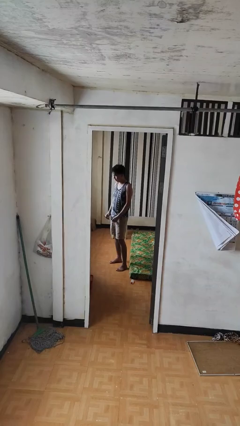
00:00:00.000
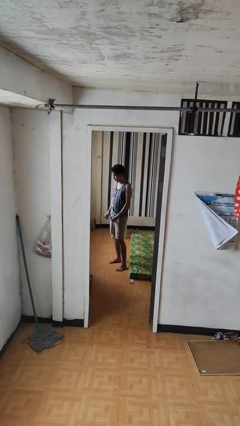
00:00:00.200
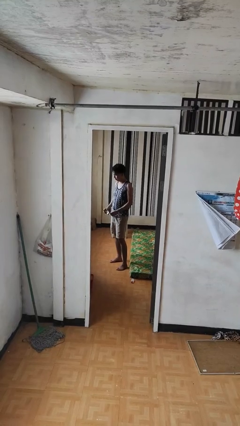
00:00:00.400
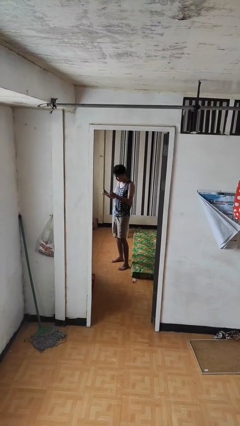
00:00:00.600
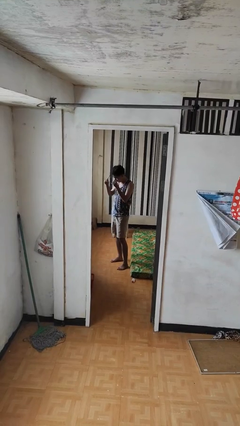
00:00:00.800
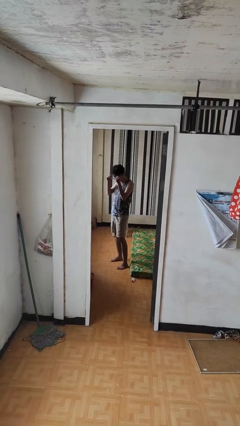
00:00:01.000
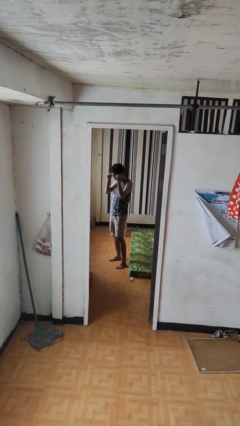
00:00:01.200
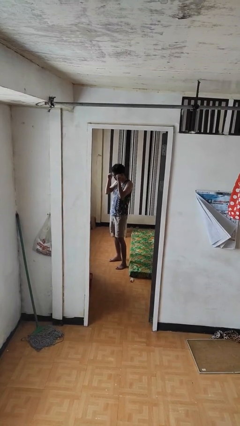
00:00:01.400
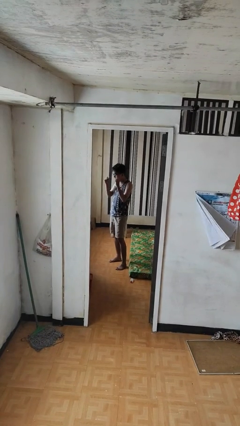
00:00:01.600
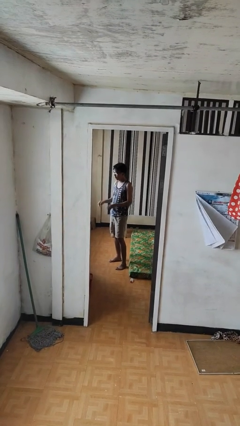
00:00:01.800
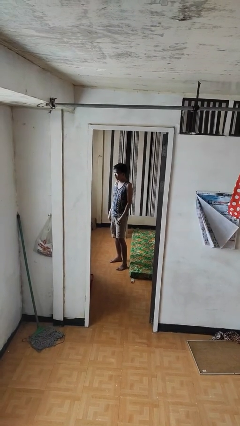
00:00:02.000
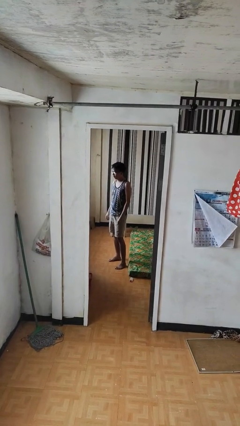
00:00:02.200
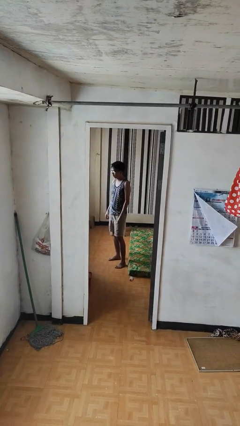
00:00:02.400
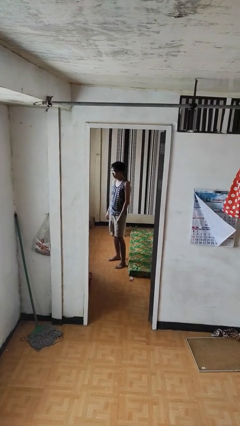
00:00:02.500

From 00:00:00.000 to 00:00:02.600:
person puts on glasses

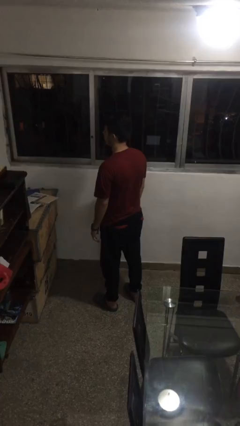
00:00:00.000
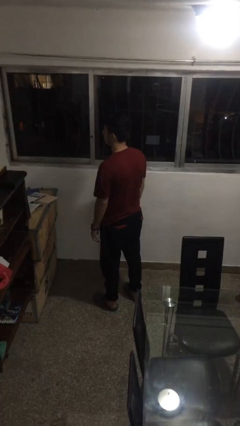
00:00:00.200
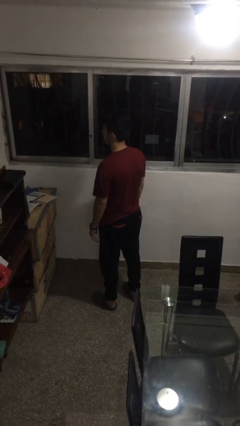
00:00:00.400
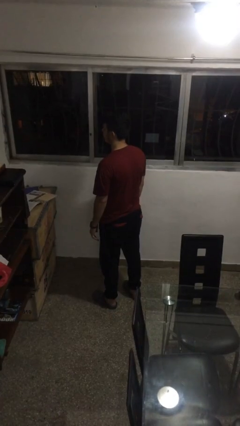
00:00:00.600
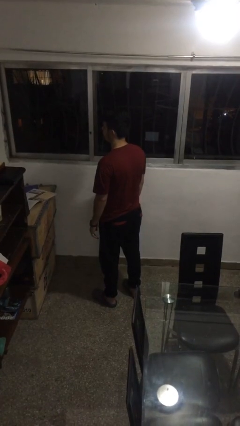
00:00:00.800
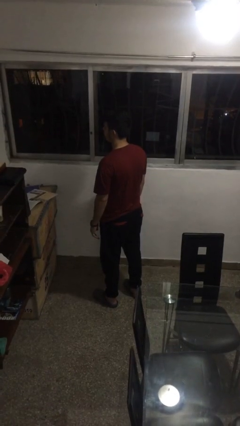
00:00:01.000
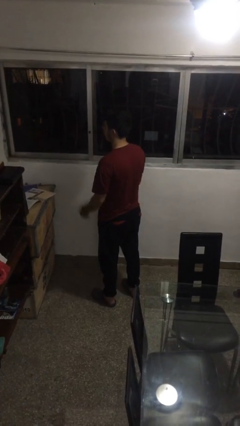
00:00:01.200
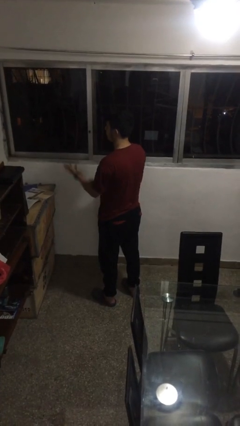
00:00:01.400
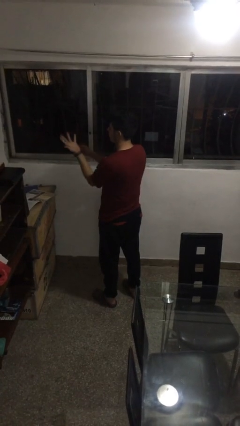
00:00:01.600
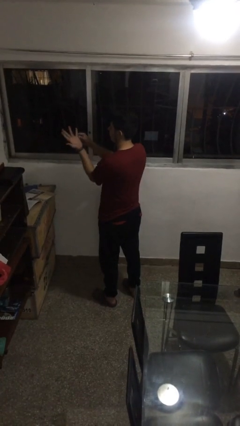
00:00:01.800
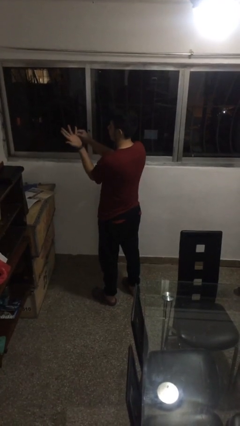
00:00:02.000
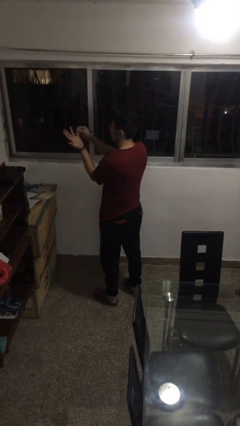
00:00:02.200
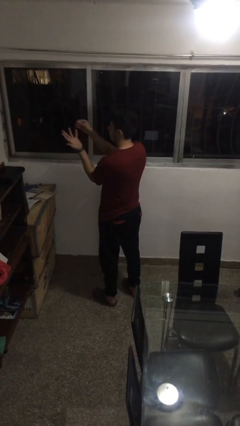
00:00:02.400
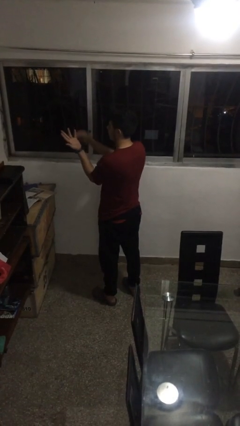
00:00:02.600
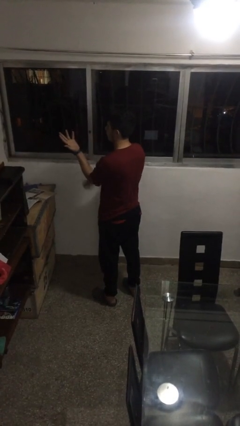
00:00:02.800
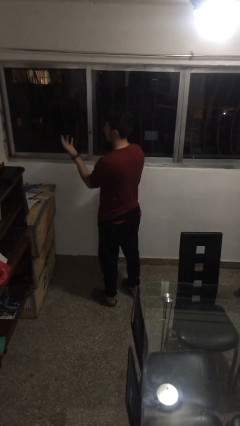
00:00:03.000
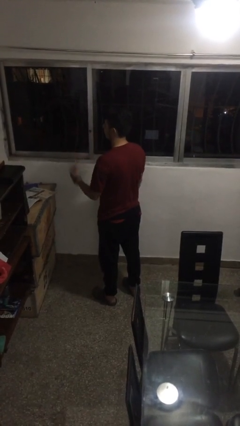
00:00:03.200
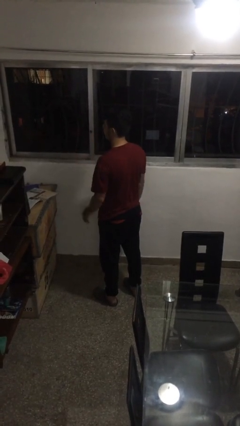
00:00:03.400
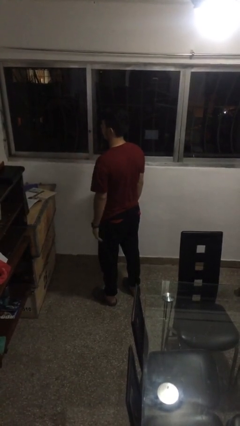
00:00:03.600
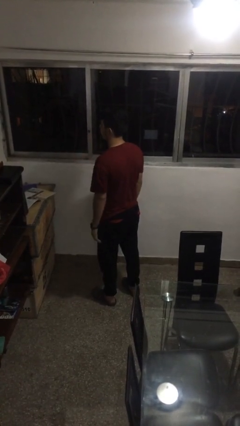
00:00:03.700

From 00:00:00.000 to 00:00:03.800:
person takes off ring

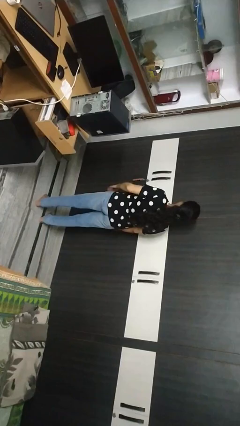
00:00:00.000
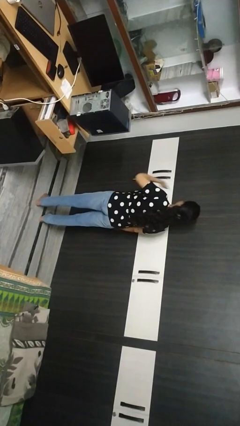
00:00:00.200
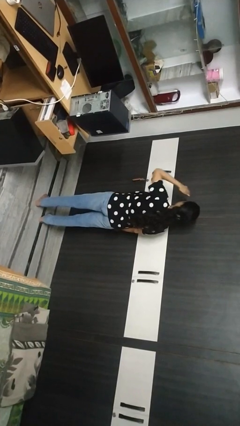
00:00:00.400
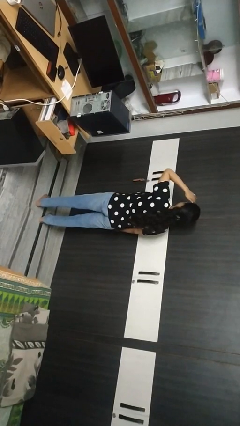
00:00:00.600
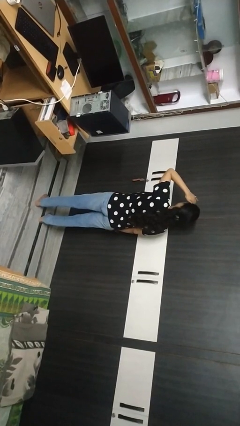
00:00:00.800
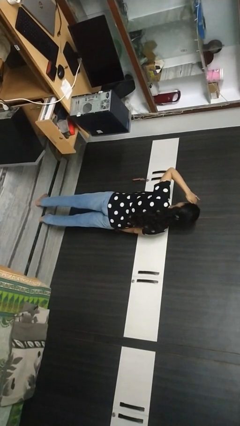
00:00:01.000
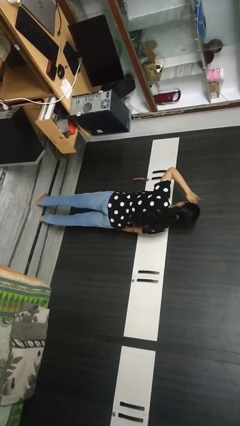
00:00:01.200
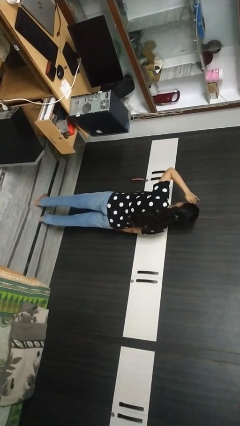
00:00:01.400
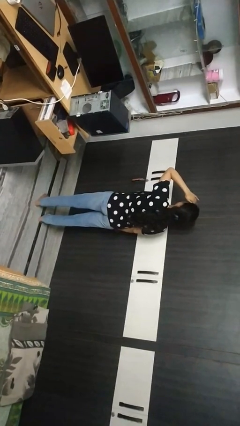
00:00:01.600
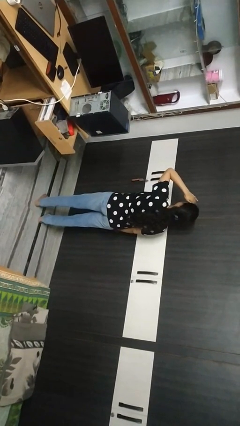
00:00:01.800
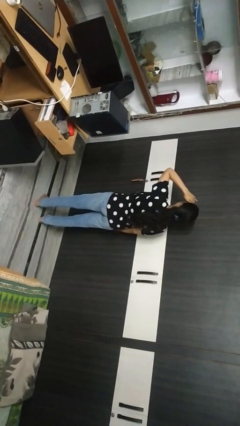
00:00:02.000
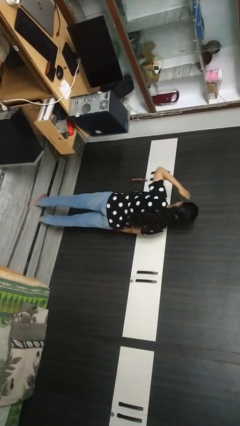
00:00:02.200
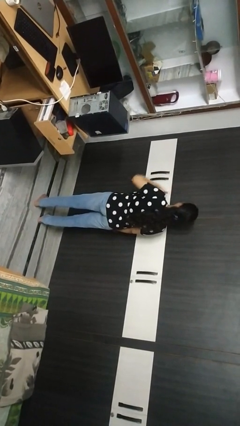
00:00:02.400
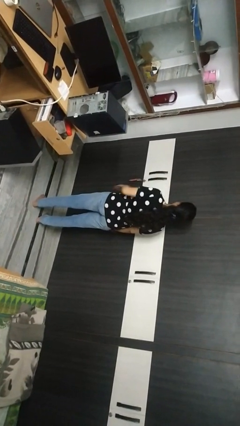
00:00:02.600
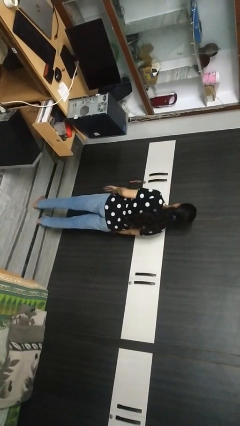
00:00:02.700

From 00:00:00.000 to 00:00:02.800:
person shades eyes

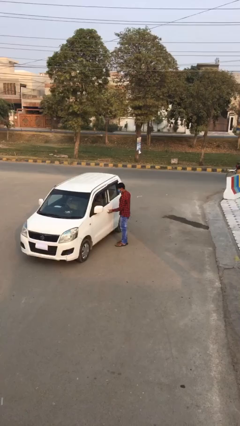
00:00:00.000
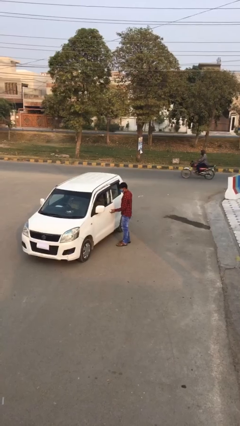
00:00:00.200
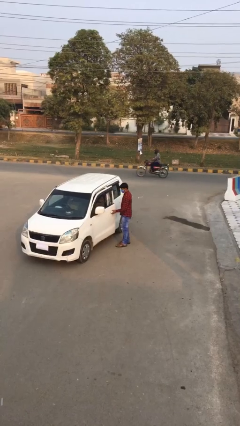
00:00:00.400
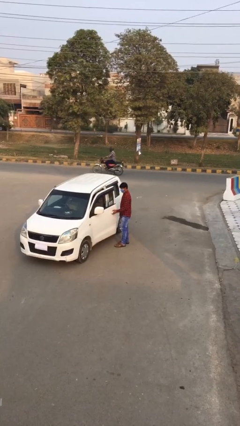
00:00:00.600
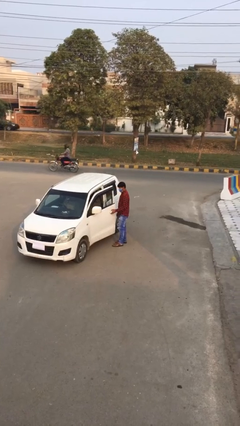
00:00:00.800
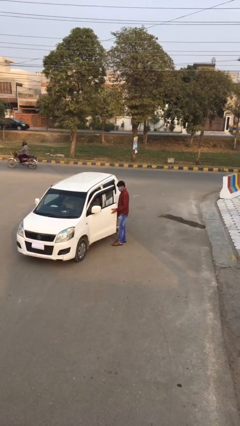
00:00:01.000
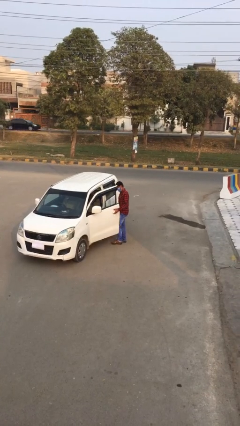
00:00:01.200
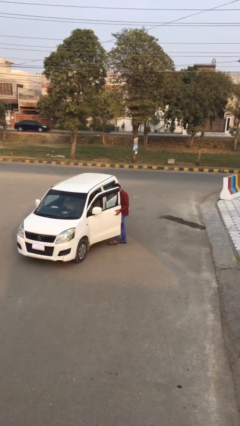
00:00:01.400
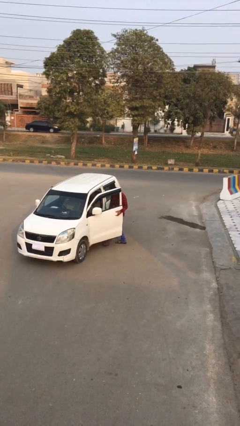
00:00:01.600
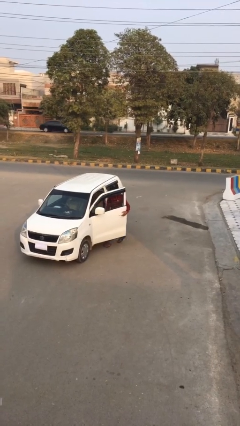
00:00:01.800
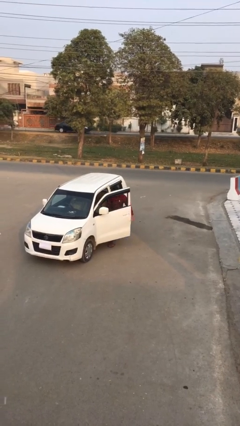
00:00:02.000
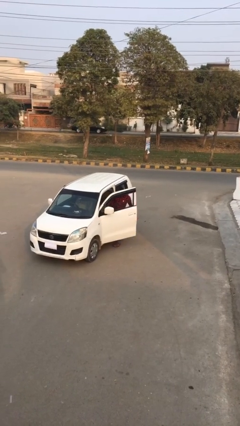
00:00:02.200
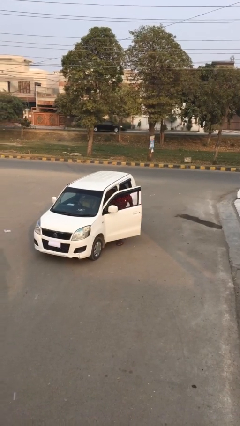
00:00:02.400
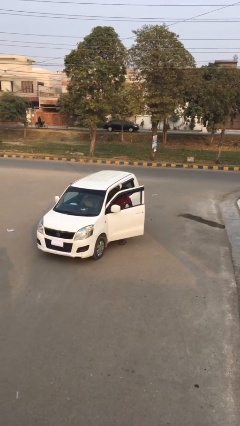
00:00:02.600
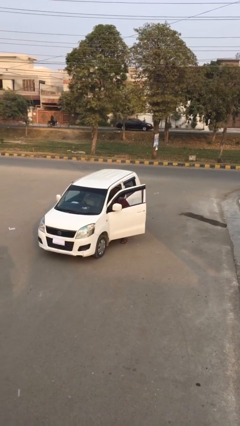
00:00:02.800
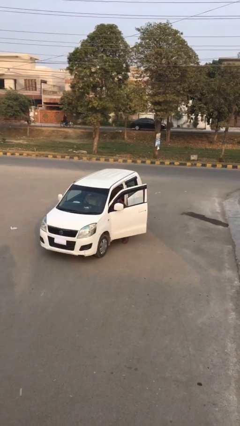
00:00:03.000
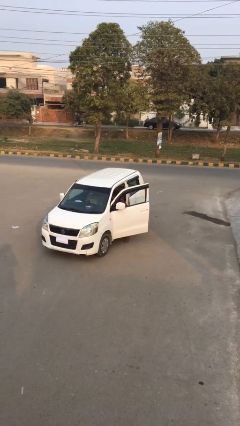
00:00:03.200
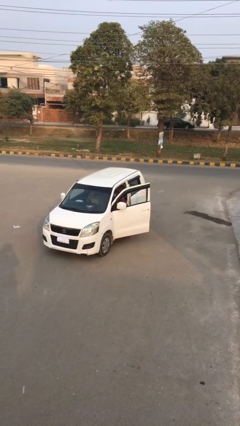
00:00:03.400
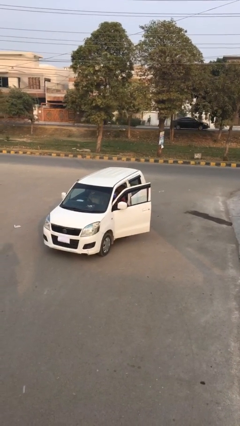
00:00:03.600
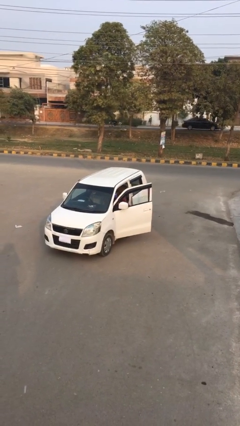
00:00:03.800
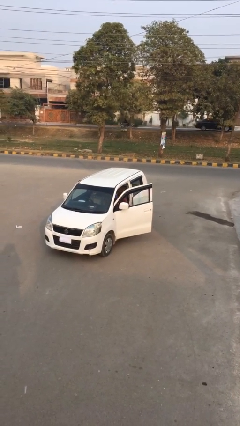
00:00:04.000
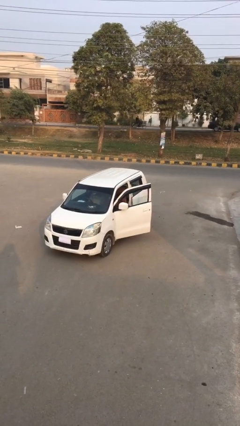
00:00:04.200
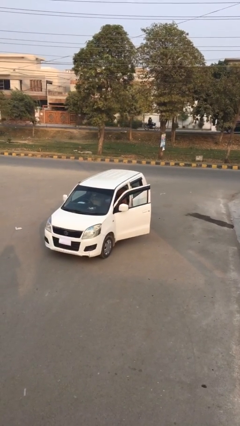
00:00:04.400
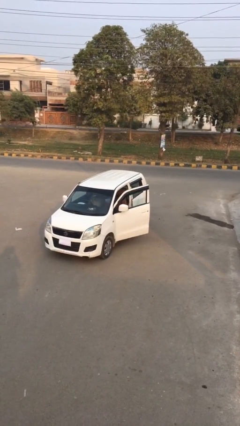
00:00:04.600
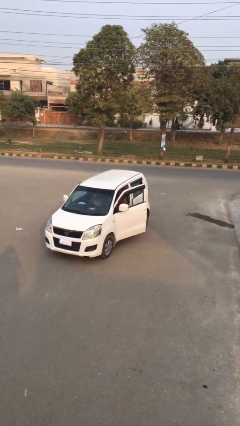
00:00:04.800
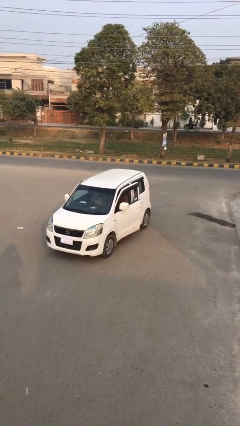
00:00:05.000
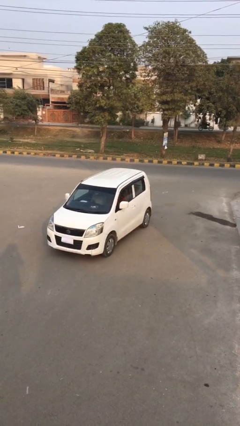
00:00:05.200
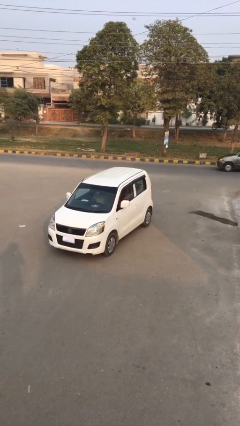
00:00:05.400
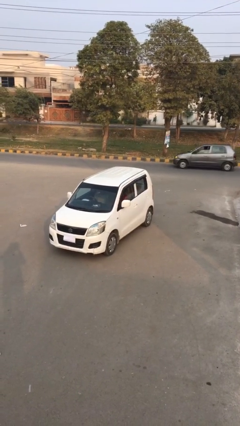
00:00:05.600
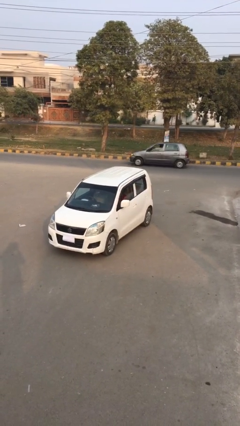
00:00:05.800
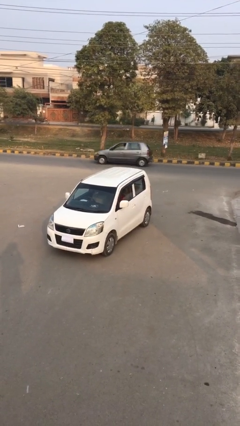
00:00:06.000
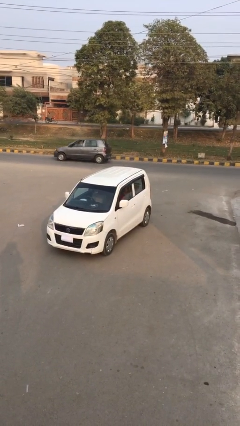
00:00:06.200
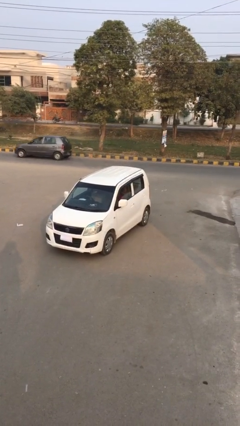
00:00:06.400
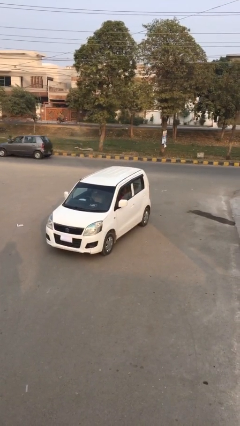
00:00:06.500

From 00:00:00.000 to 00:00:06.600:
person enters car

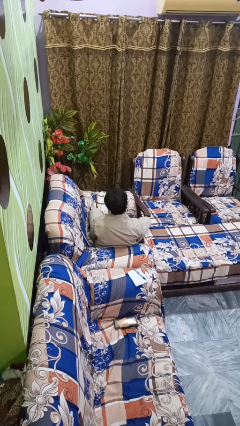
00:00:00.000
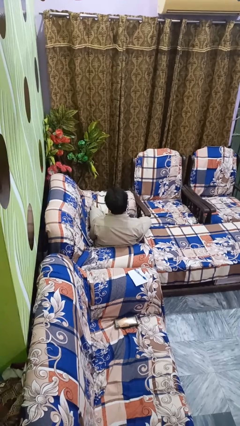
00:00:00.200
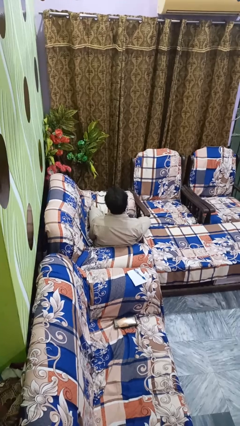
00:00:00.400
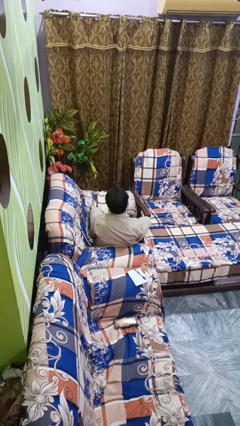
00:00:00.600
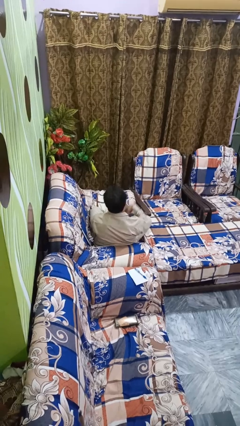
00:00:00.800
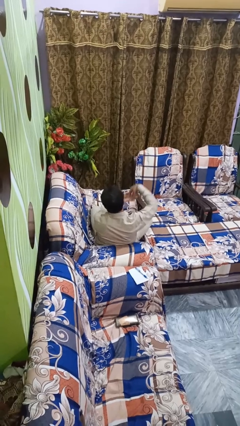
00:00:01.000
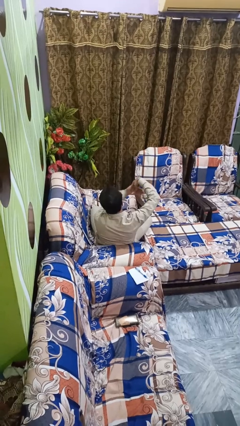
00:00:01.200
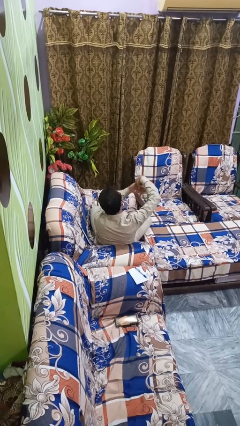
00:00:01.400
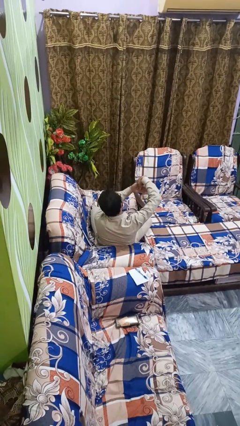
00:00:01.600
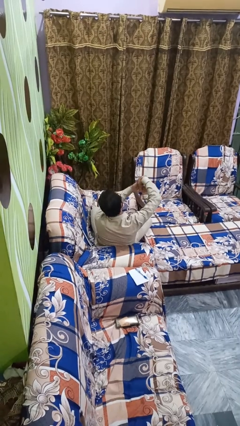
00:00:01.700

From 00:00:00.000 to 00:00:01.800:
person gestures hang loose
